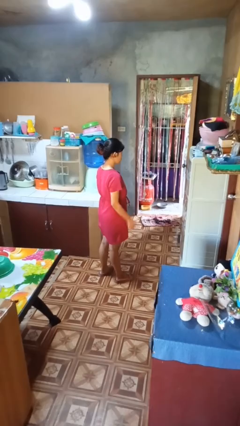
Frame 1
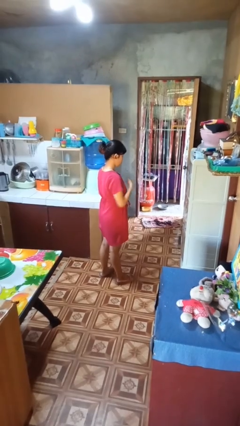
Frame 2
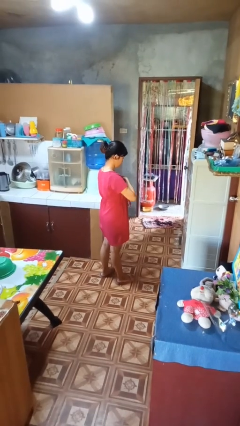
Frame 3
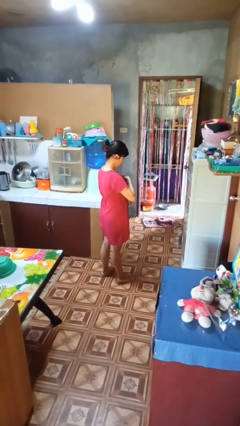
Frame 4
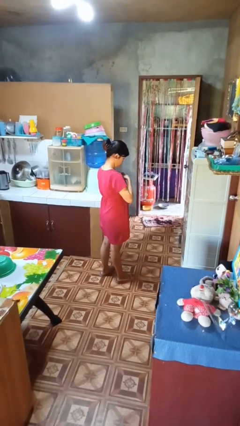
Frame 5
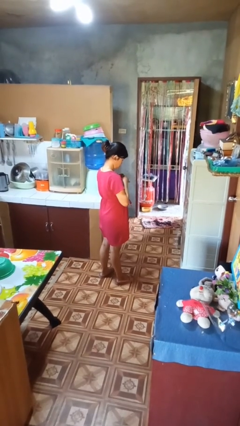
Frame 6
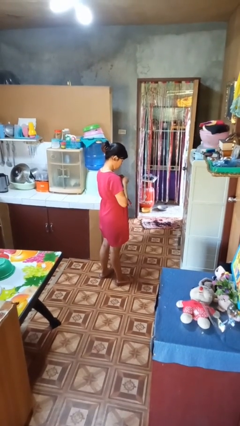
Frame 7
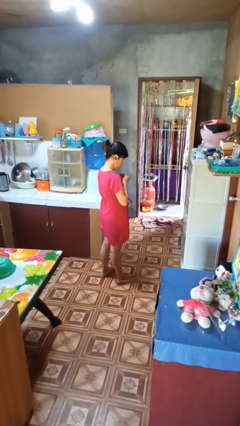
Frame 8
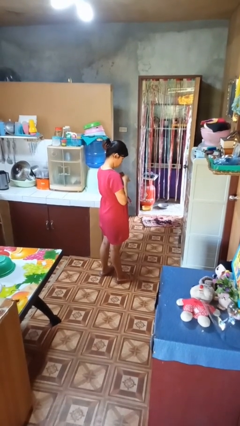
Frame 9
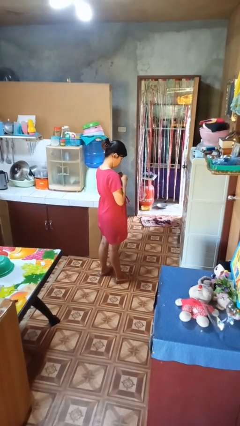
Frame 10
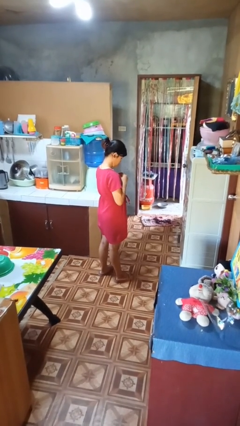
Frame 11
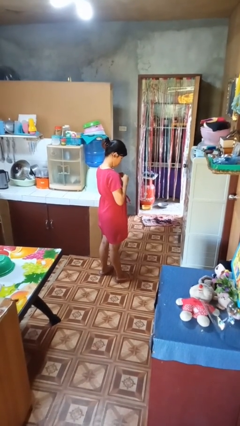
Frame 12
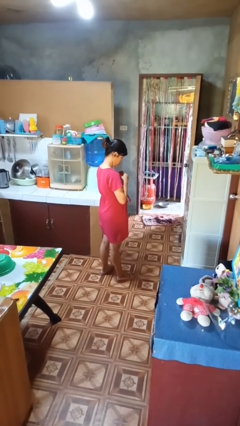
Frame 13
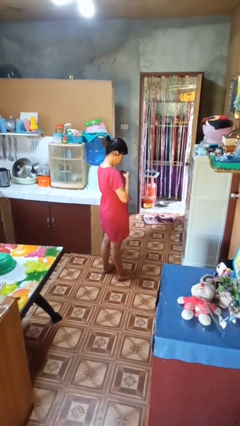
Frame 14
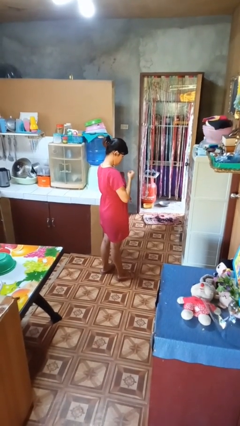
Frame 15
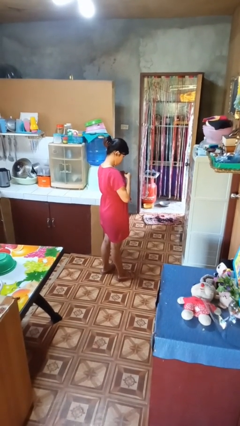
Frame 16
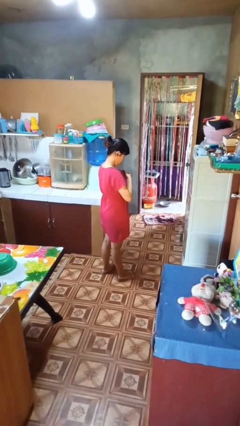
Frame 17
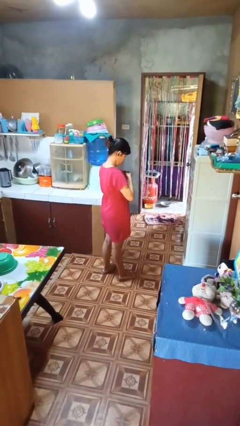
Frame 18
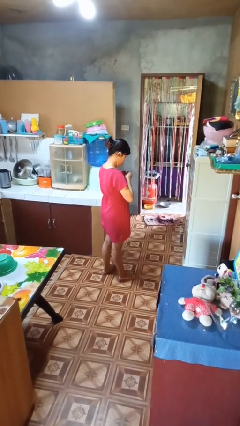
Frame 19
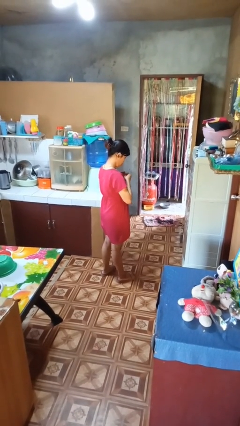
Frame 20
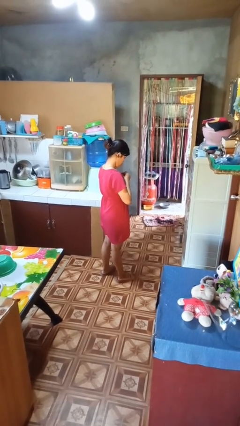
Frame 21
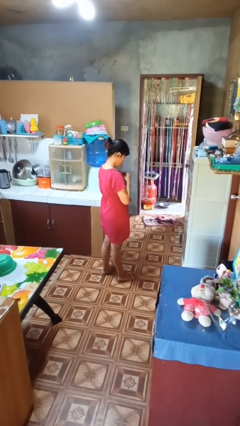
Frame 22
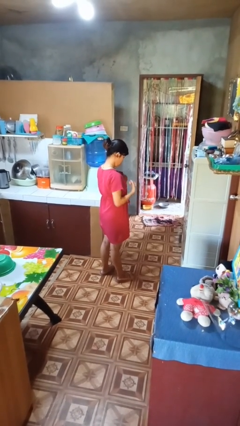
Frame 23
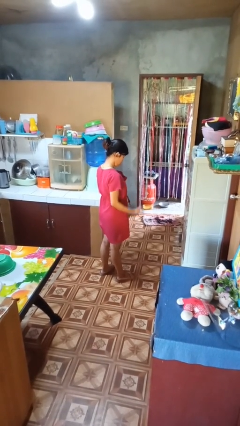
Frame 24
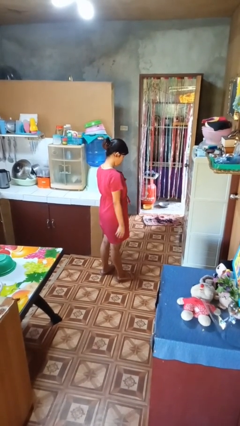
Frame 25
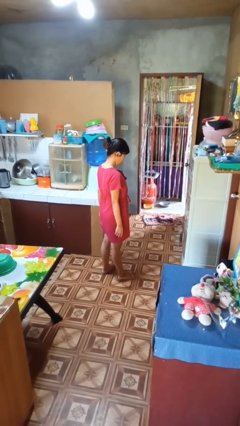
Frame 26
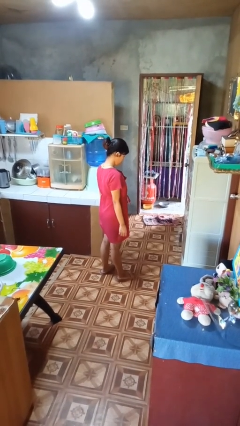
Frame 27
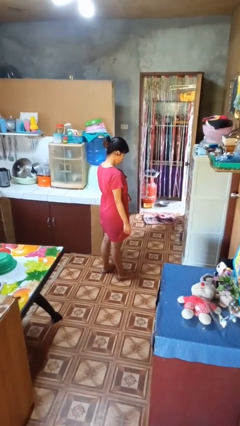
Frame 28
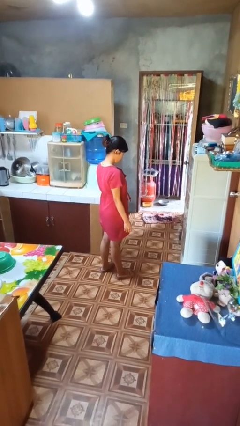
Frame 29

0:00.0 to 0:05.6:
person unbuttons shirt

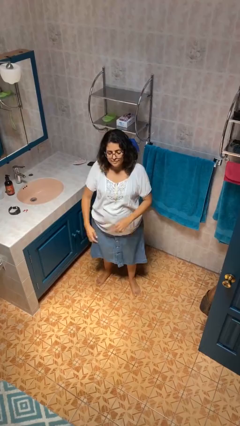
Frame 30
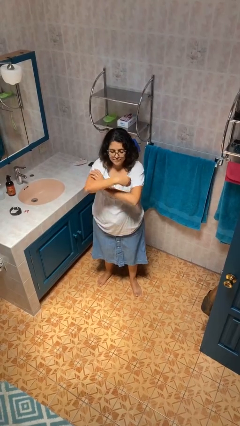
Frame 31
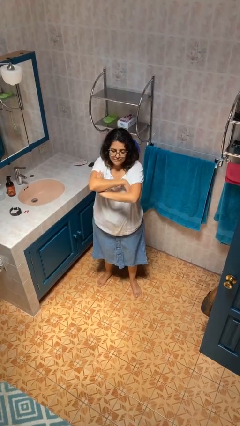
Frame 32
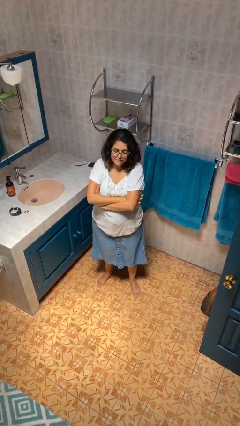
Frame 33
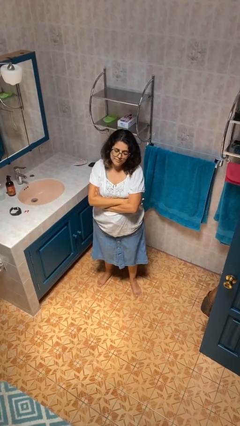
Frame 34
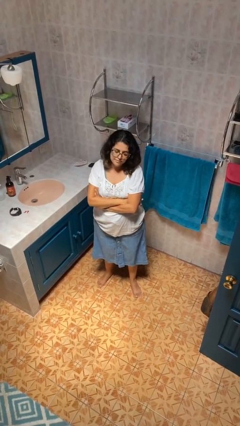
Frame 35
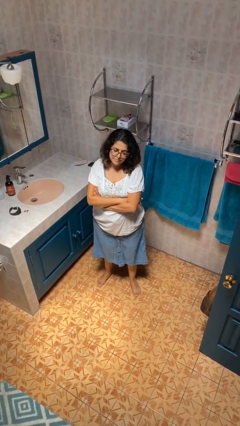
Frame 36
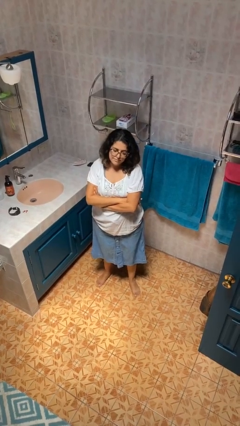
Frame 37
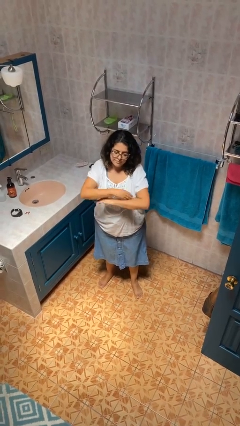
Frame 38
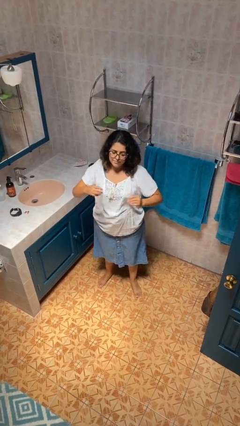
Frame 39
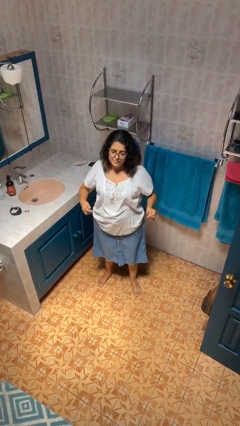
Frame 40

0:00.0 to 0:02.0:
person crosses arms

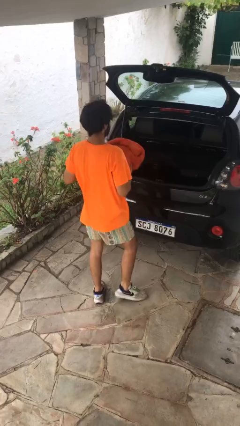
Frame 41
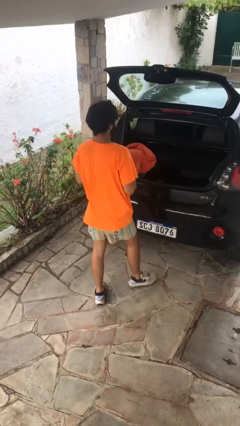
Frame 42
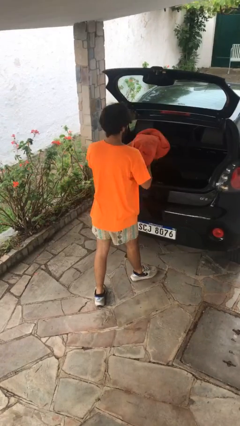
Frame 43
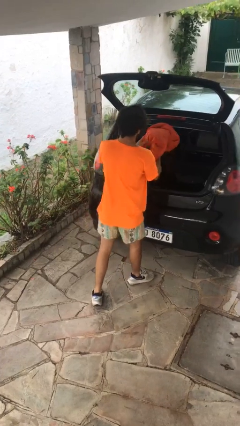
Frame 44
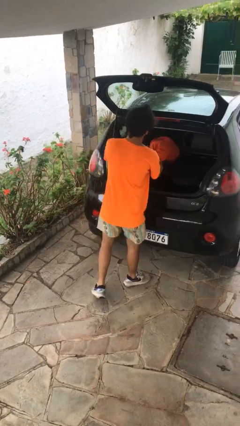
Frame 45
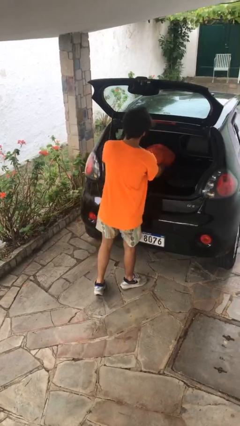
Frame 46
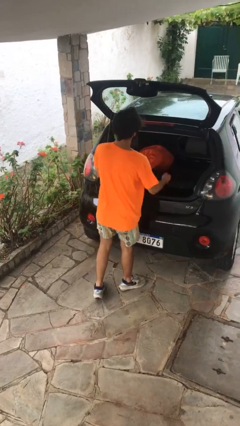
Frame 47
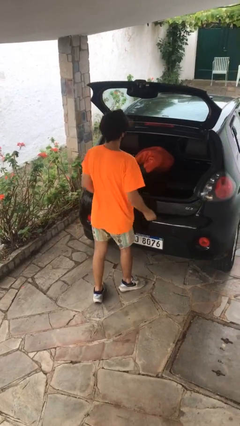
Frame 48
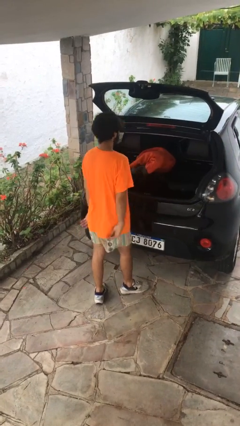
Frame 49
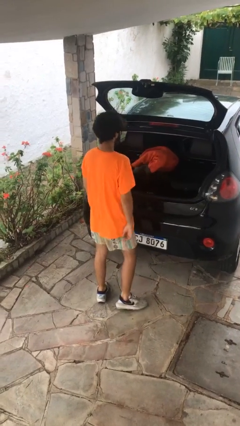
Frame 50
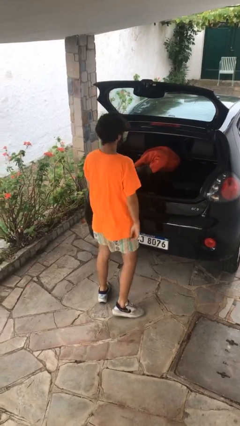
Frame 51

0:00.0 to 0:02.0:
person loads car

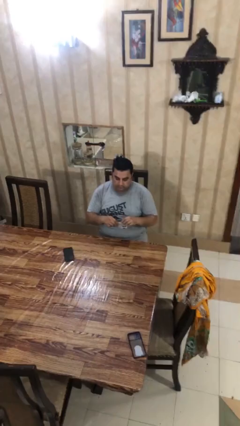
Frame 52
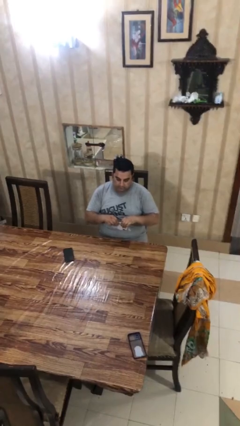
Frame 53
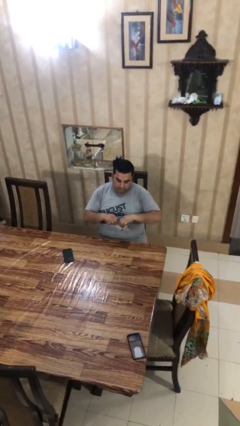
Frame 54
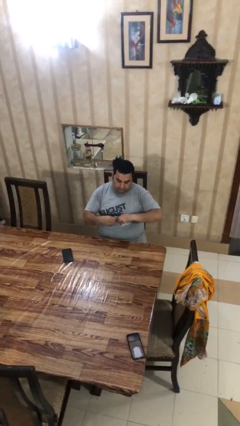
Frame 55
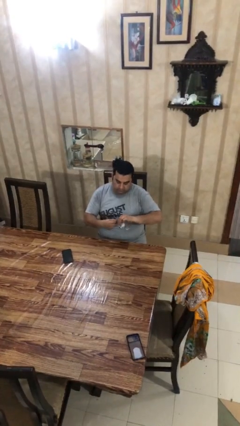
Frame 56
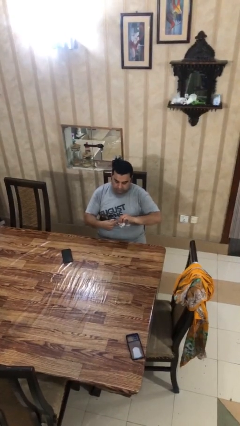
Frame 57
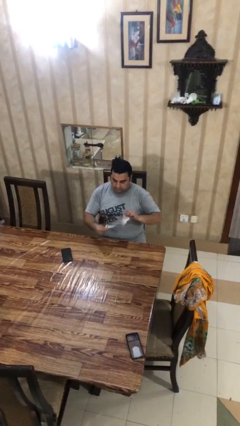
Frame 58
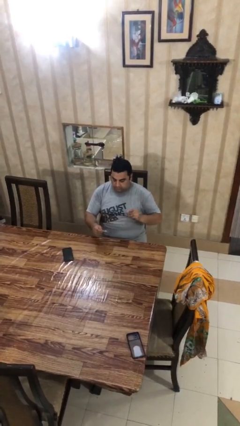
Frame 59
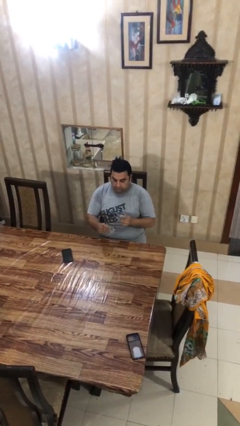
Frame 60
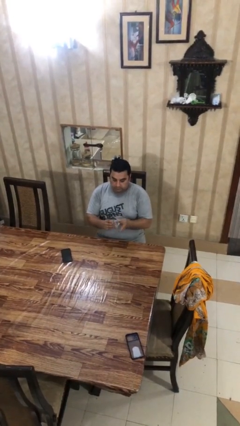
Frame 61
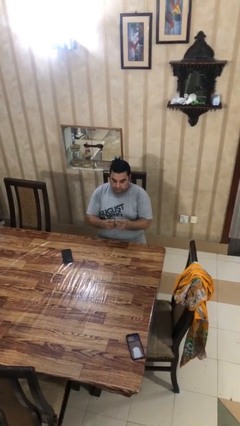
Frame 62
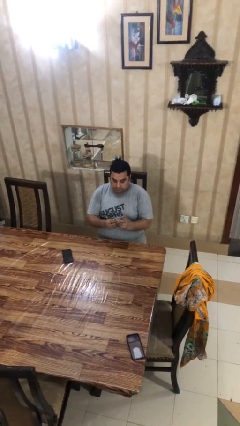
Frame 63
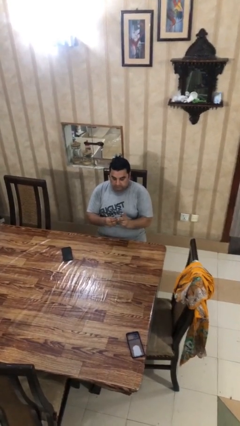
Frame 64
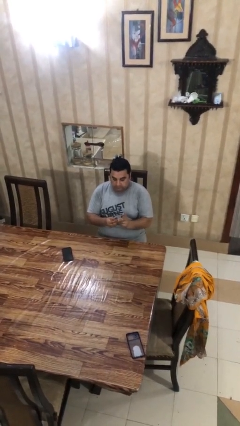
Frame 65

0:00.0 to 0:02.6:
person tears paper

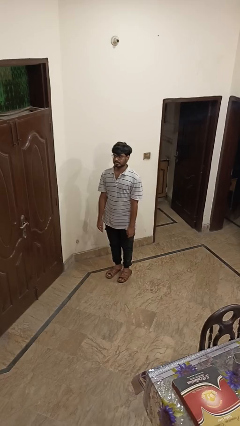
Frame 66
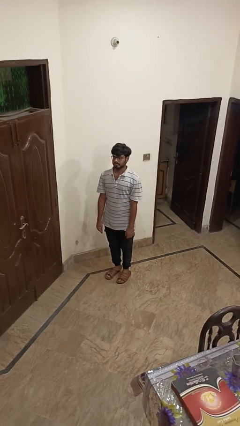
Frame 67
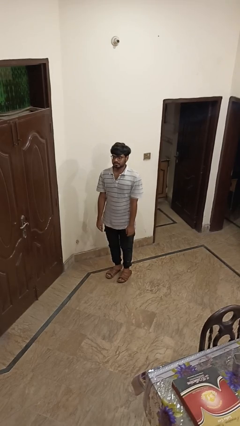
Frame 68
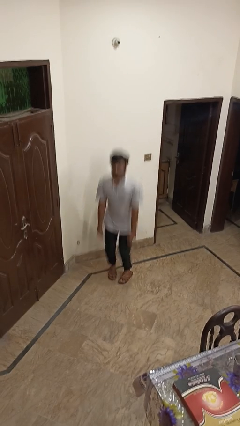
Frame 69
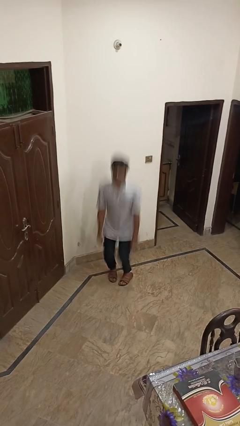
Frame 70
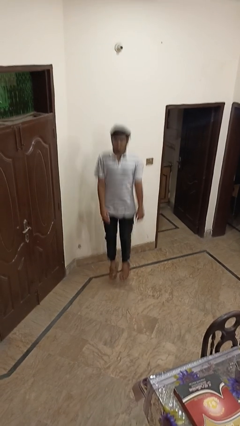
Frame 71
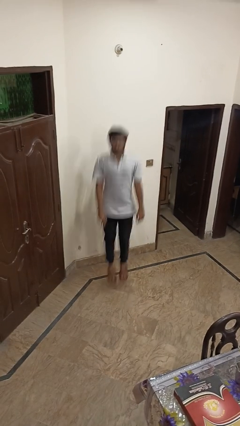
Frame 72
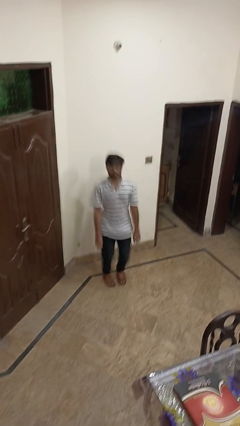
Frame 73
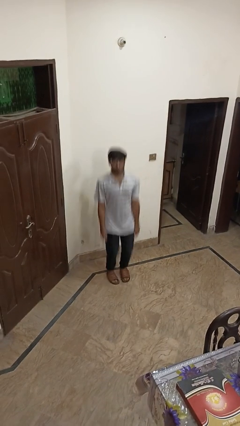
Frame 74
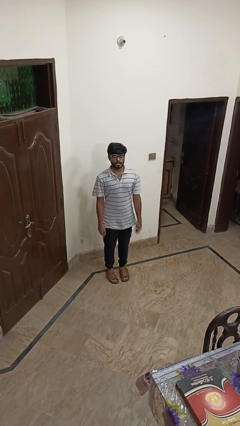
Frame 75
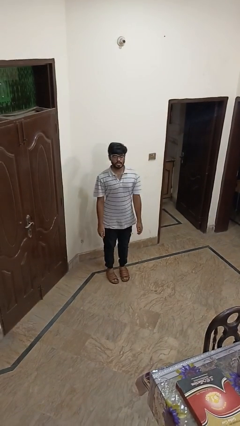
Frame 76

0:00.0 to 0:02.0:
person jumps

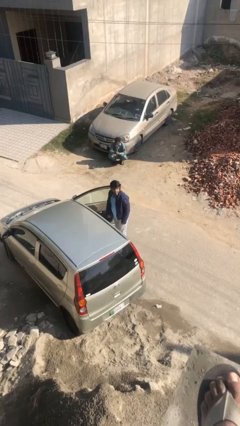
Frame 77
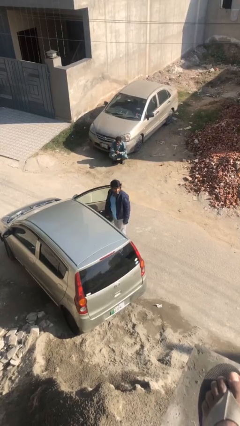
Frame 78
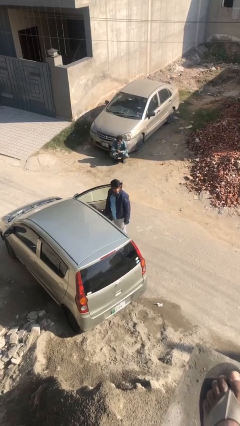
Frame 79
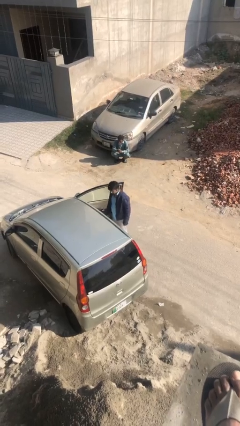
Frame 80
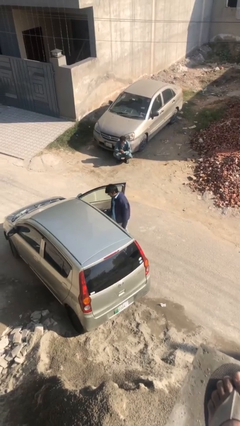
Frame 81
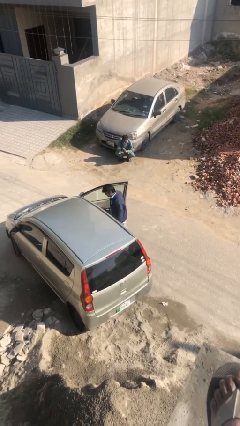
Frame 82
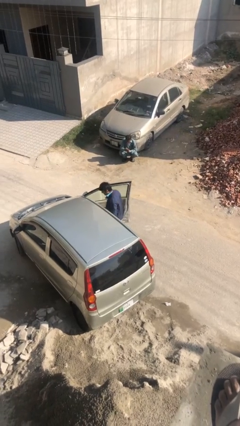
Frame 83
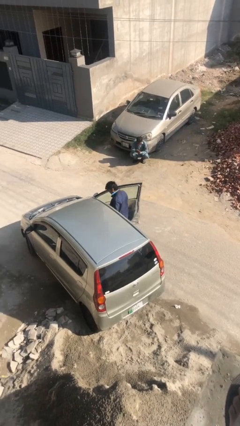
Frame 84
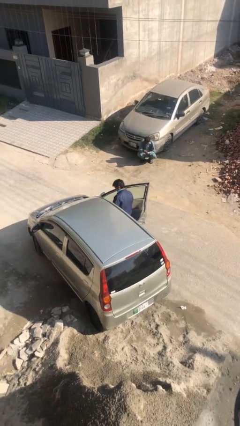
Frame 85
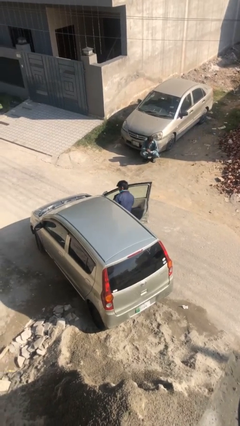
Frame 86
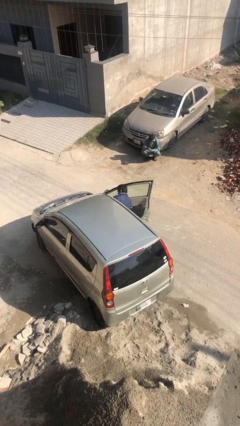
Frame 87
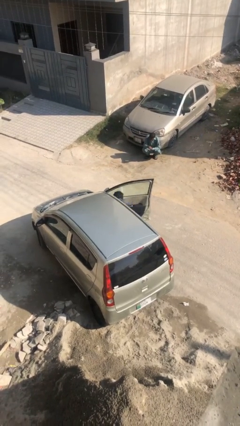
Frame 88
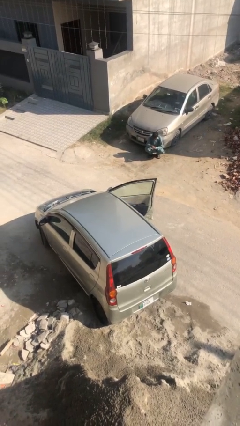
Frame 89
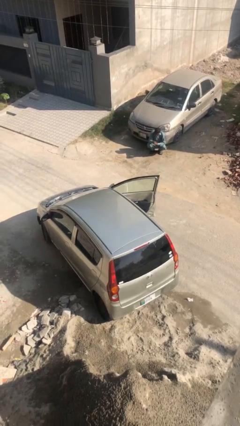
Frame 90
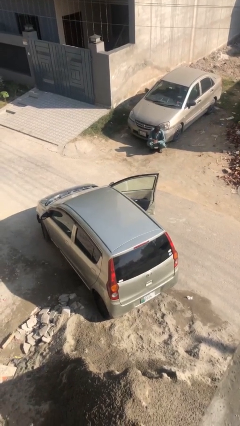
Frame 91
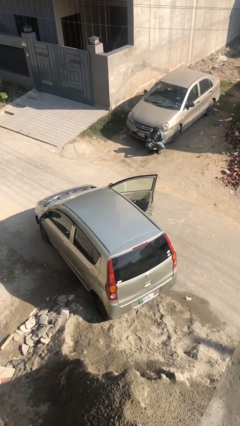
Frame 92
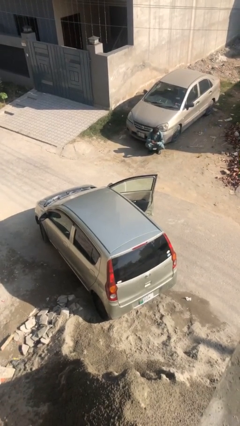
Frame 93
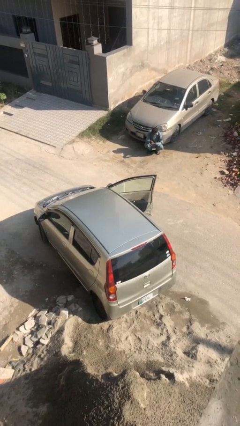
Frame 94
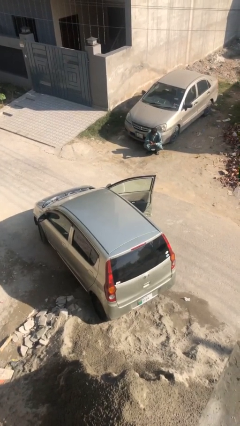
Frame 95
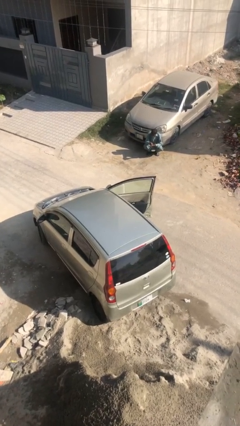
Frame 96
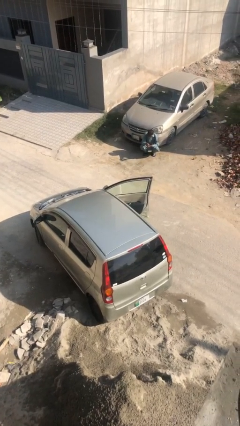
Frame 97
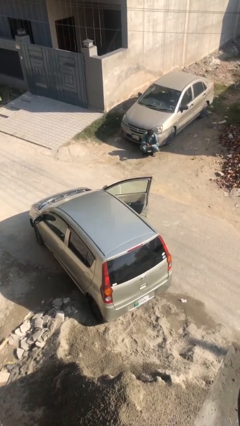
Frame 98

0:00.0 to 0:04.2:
person enters car
